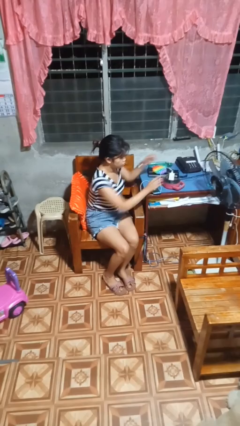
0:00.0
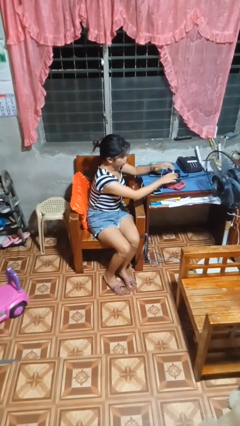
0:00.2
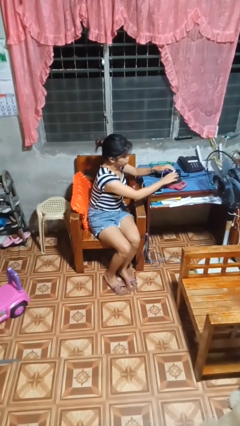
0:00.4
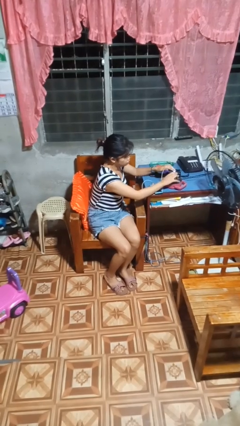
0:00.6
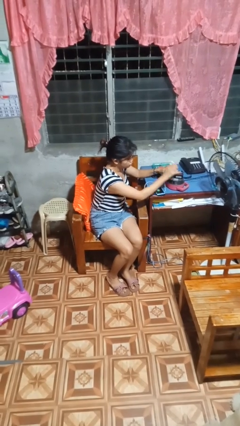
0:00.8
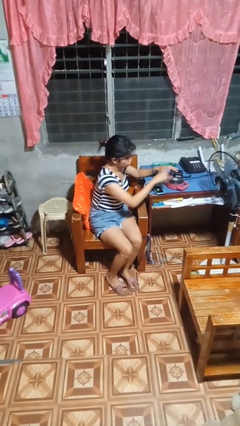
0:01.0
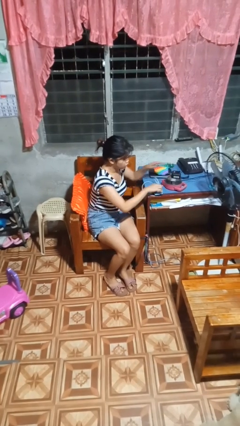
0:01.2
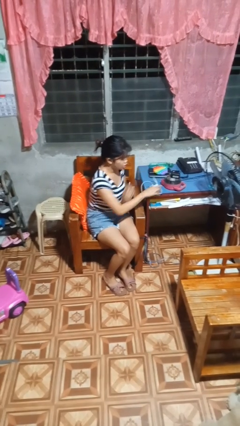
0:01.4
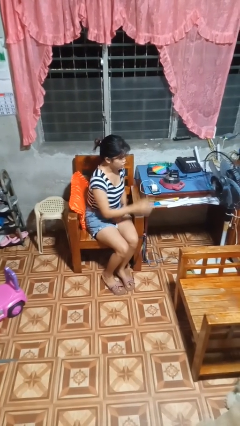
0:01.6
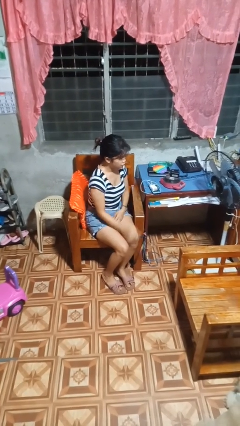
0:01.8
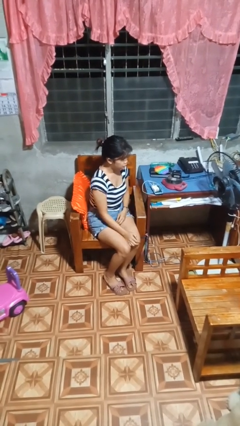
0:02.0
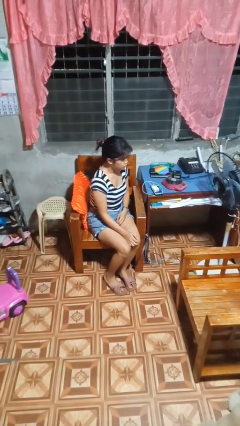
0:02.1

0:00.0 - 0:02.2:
person unplugs from electrical socket

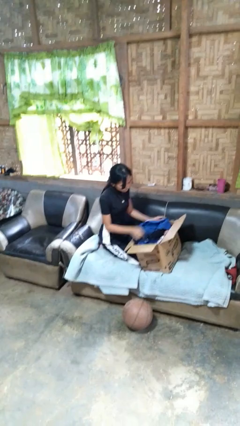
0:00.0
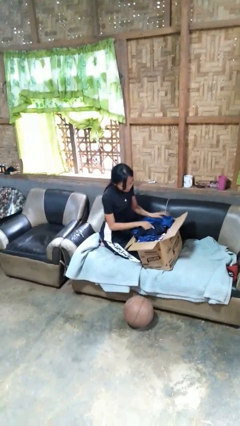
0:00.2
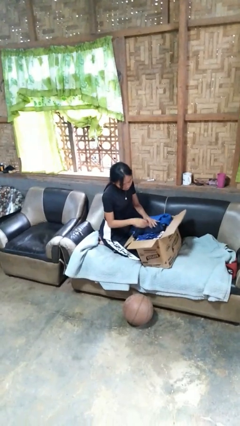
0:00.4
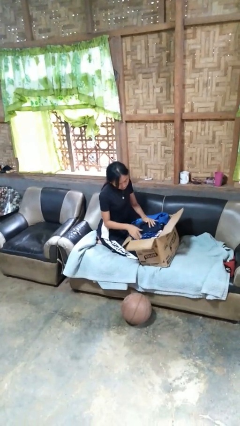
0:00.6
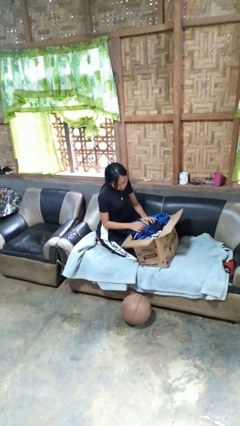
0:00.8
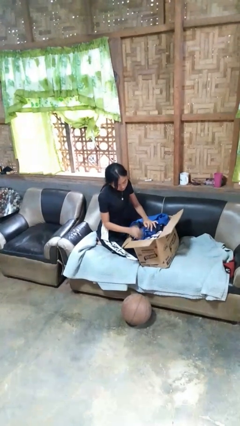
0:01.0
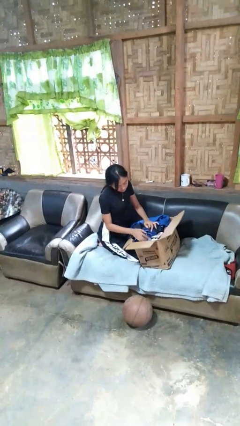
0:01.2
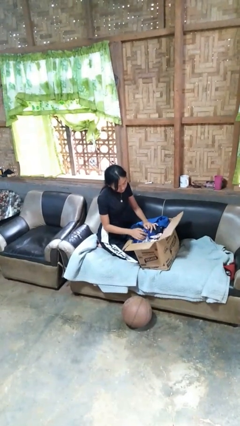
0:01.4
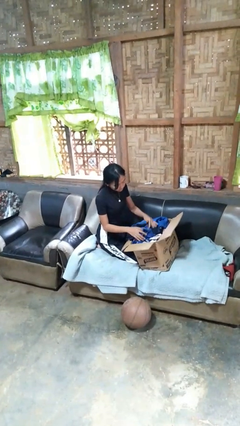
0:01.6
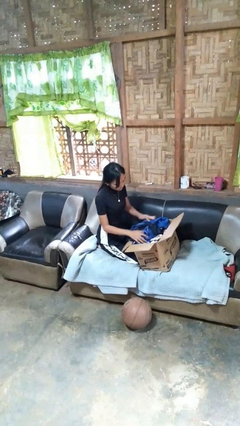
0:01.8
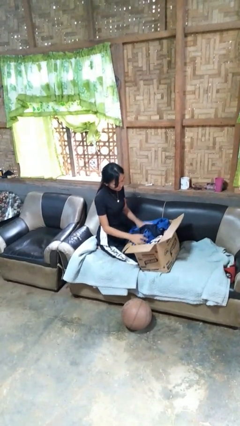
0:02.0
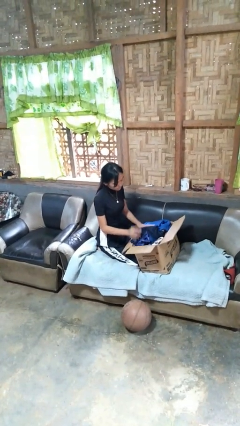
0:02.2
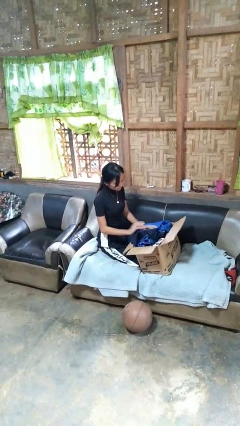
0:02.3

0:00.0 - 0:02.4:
person searches in box

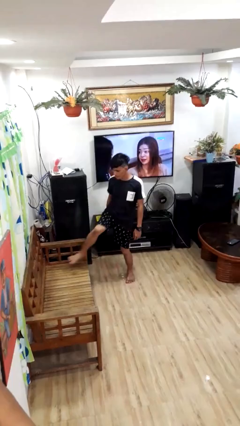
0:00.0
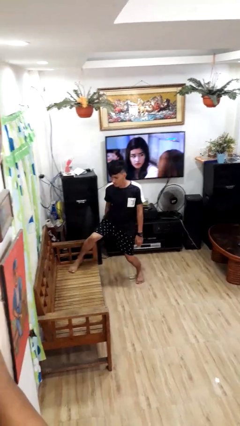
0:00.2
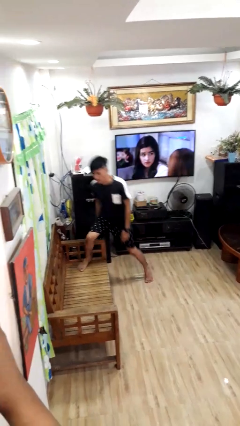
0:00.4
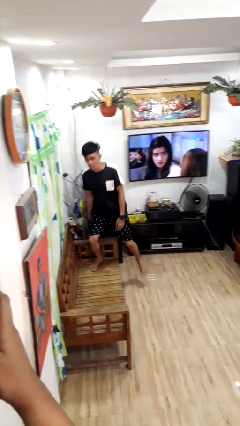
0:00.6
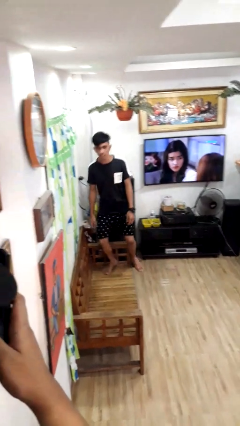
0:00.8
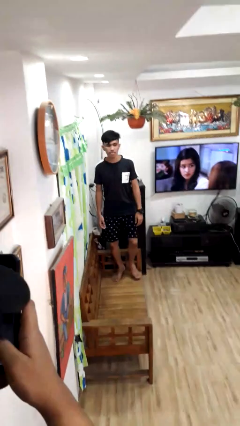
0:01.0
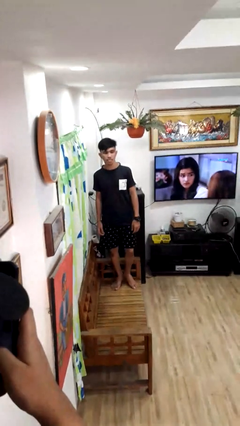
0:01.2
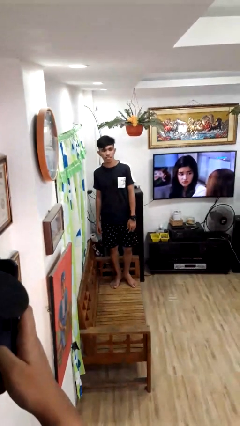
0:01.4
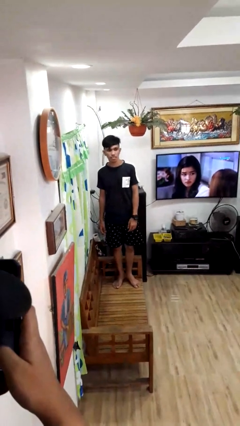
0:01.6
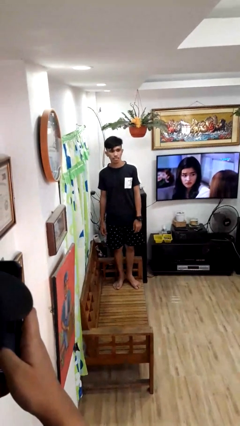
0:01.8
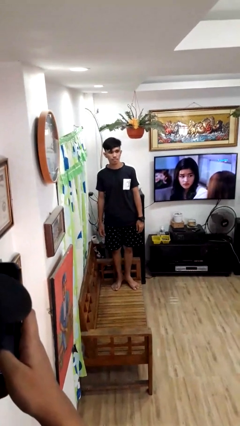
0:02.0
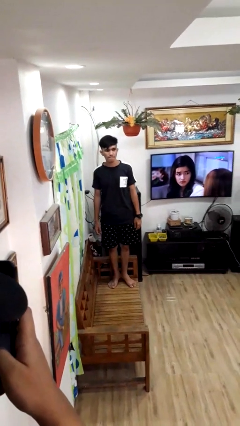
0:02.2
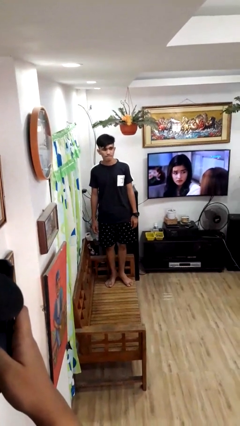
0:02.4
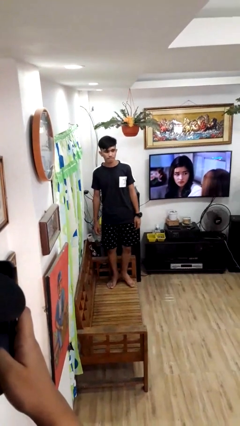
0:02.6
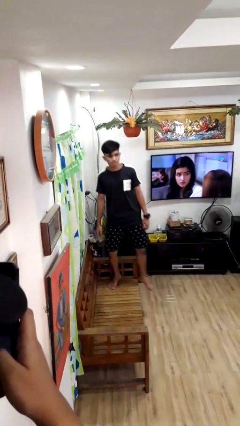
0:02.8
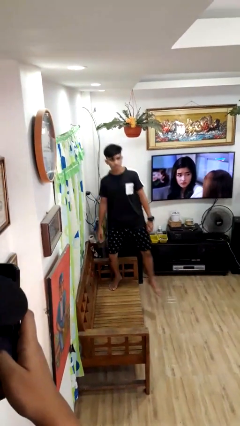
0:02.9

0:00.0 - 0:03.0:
person climbs on couch

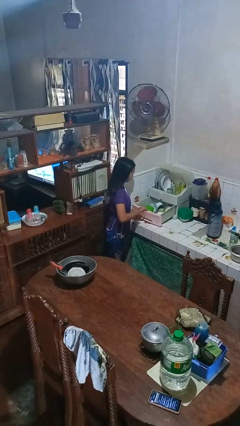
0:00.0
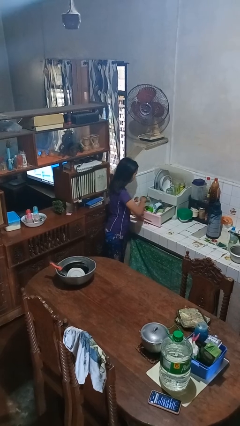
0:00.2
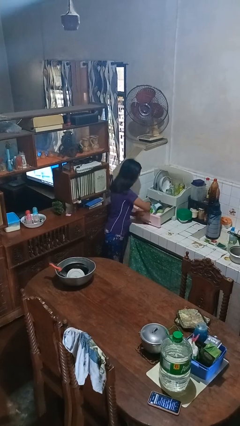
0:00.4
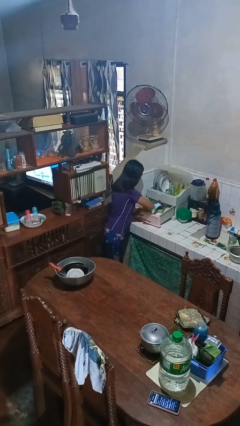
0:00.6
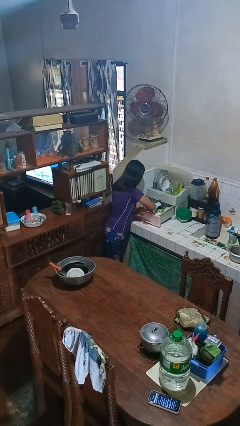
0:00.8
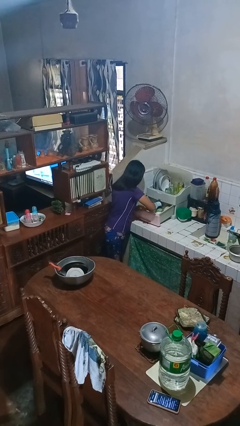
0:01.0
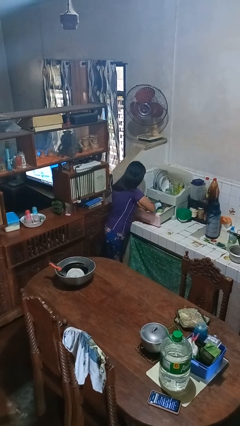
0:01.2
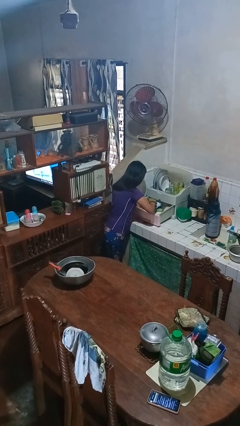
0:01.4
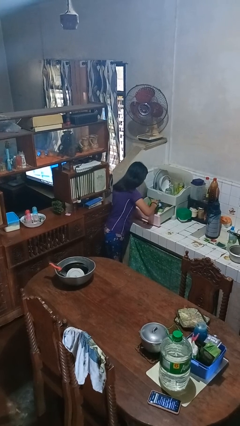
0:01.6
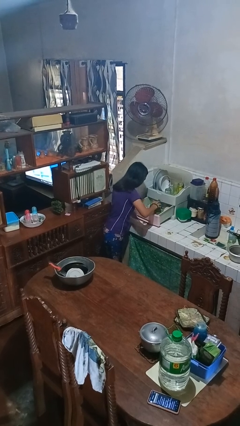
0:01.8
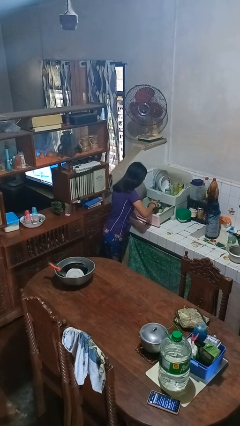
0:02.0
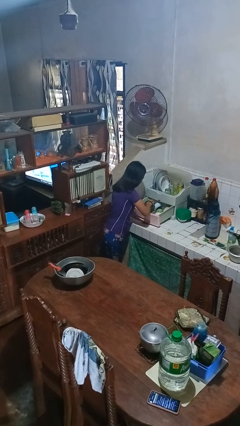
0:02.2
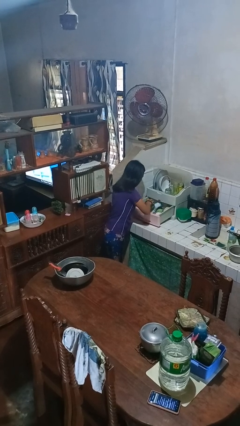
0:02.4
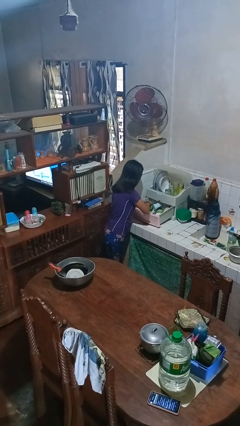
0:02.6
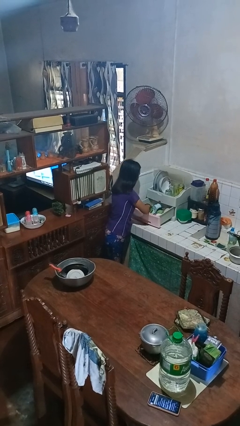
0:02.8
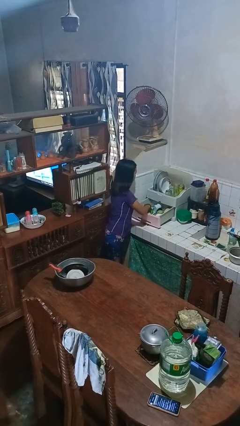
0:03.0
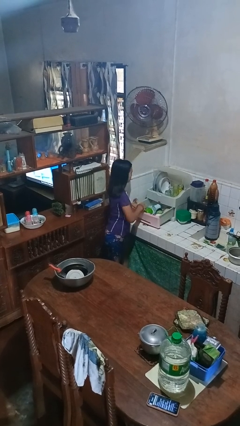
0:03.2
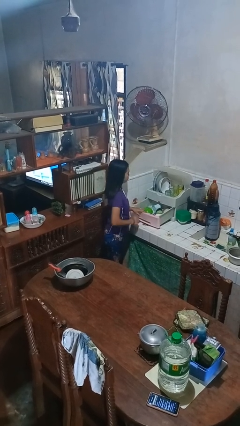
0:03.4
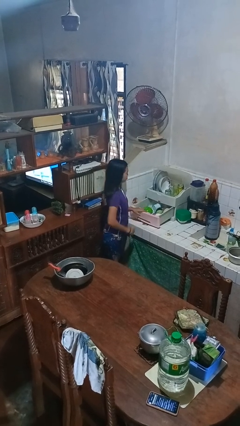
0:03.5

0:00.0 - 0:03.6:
person searches in kitchen drawer

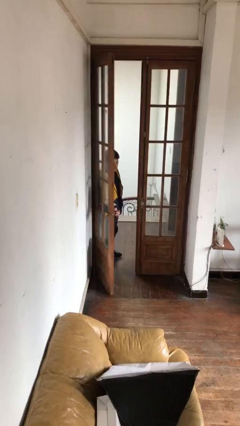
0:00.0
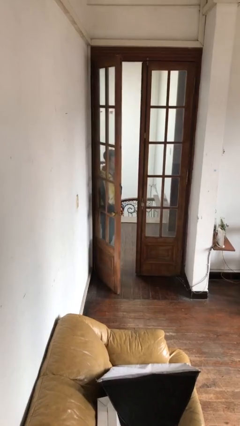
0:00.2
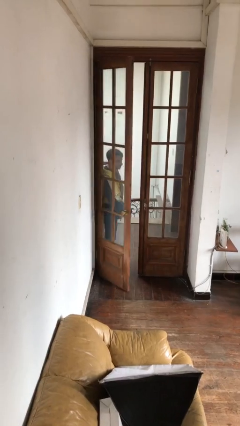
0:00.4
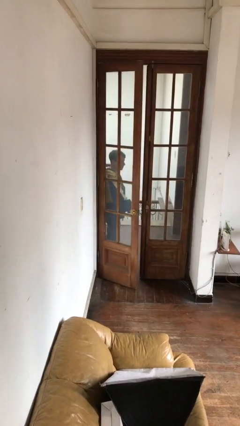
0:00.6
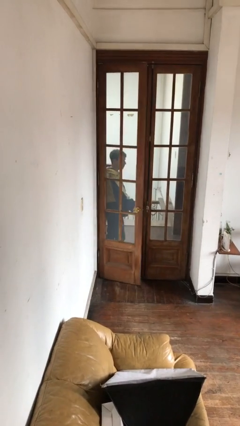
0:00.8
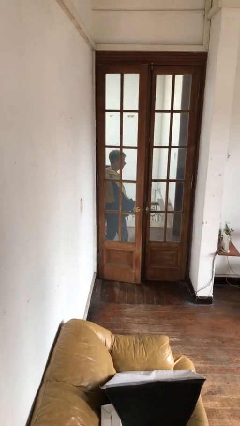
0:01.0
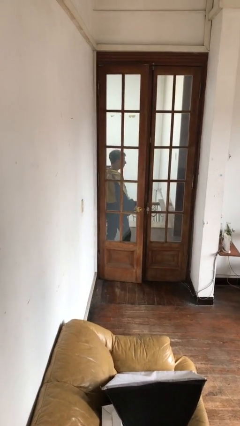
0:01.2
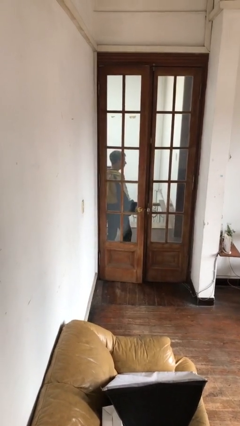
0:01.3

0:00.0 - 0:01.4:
person closes facility door

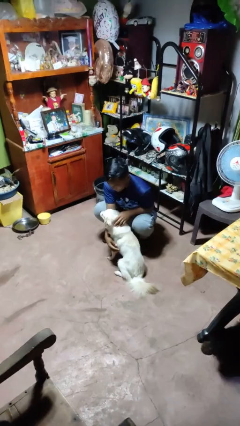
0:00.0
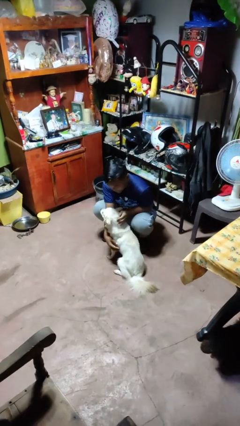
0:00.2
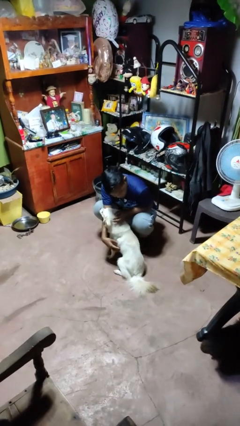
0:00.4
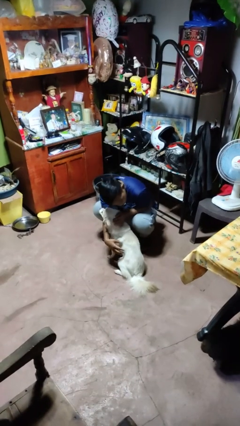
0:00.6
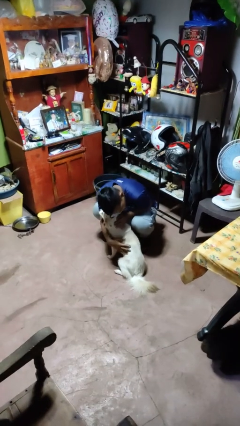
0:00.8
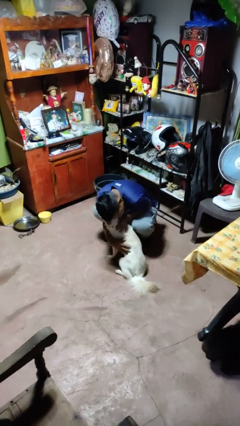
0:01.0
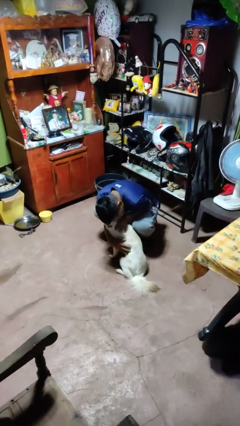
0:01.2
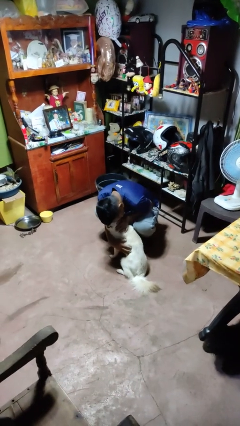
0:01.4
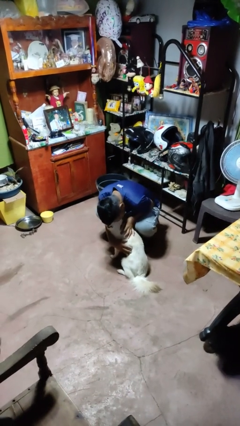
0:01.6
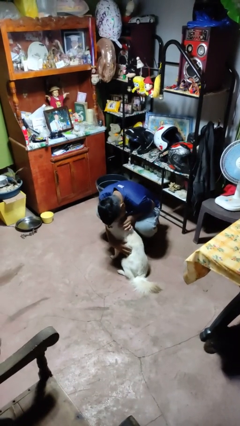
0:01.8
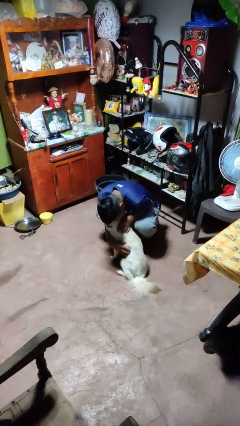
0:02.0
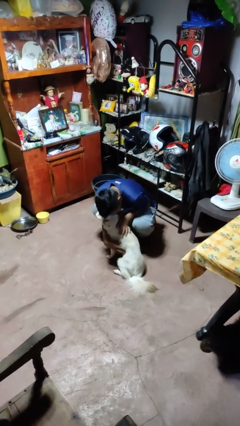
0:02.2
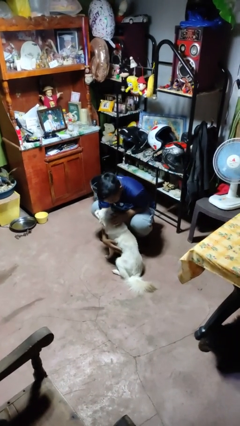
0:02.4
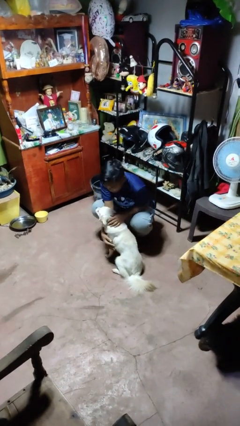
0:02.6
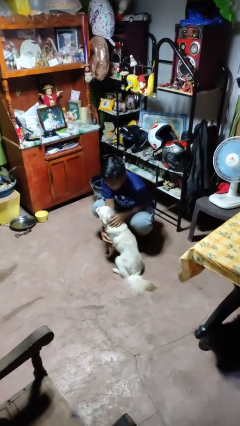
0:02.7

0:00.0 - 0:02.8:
person hugs dog

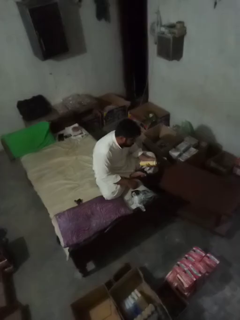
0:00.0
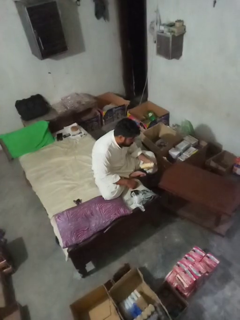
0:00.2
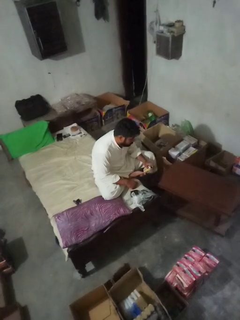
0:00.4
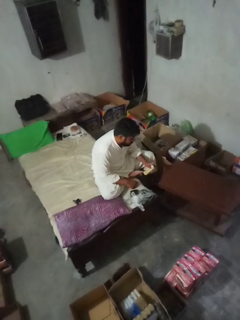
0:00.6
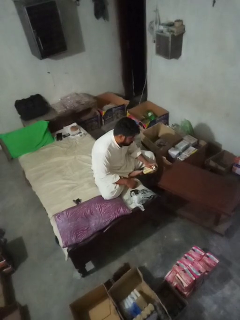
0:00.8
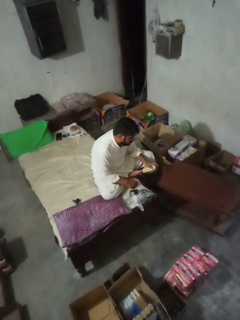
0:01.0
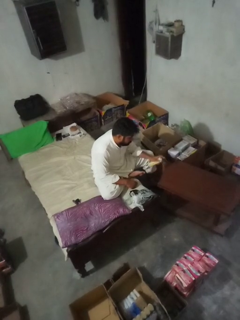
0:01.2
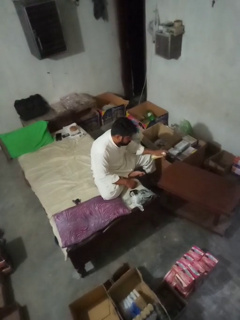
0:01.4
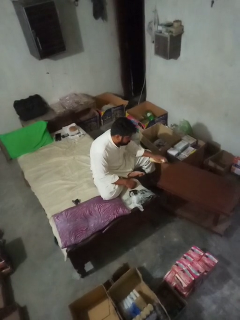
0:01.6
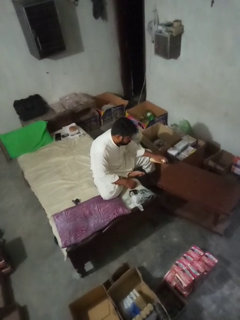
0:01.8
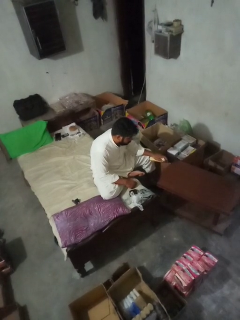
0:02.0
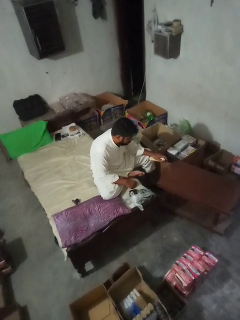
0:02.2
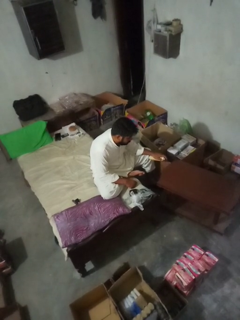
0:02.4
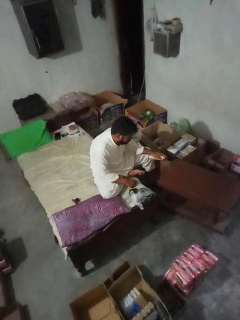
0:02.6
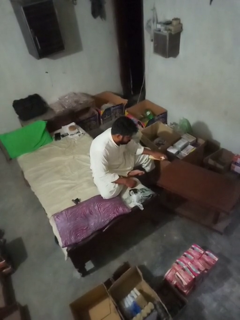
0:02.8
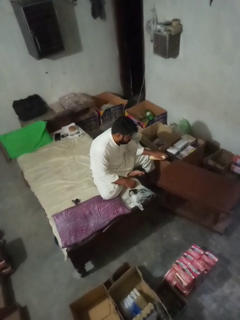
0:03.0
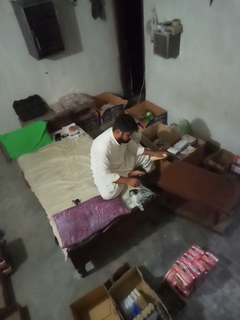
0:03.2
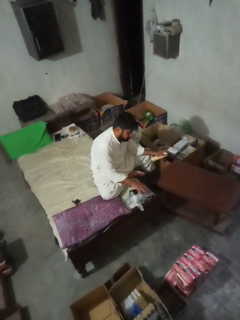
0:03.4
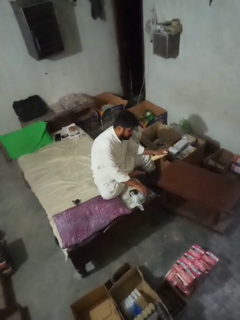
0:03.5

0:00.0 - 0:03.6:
person sprays from bottle
